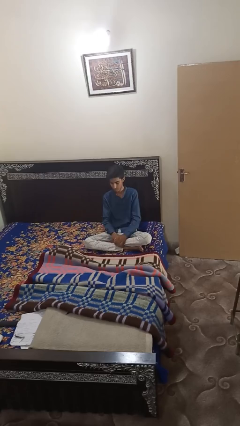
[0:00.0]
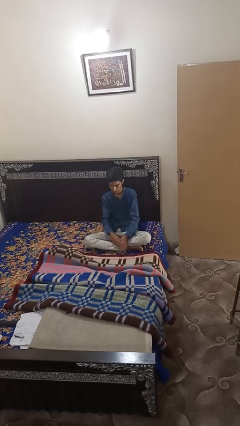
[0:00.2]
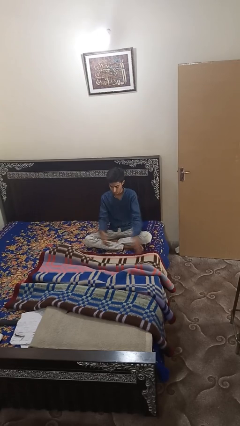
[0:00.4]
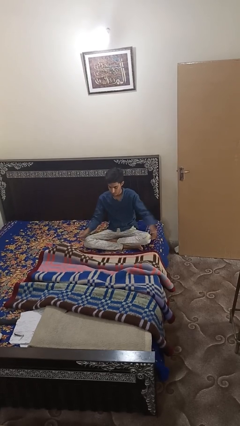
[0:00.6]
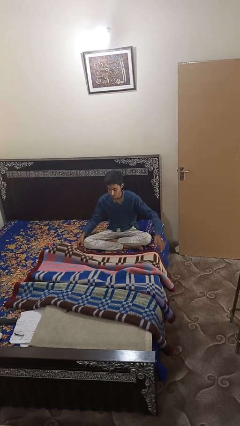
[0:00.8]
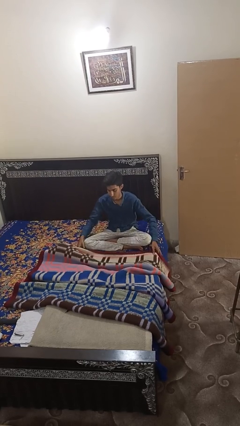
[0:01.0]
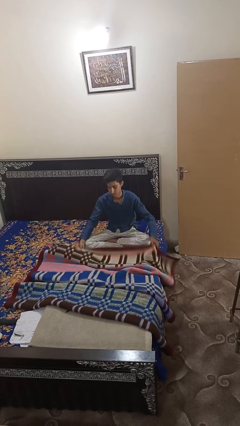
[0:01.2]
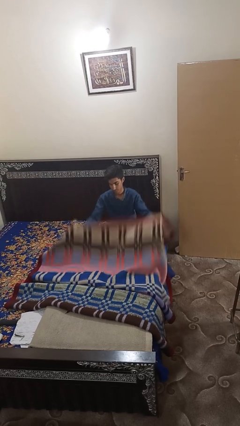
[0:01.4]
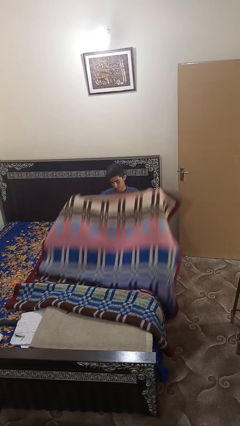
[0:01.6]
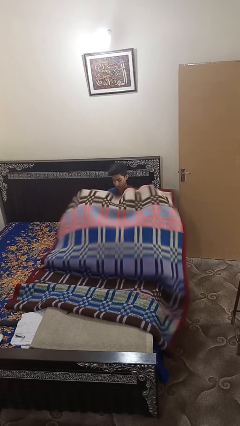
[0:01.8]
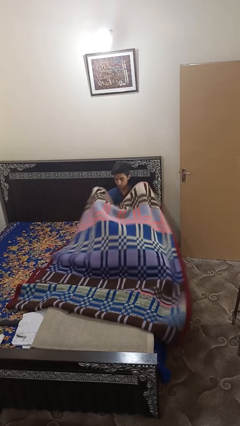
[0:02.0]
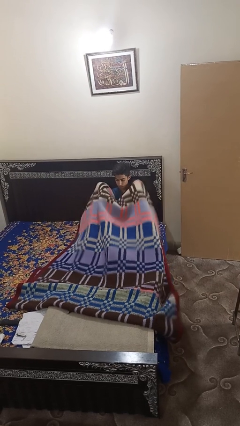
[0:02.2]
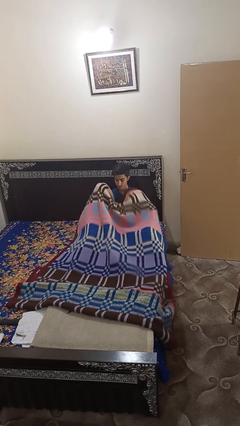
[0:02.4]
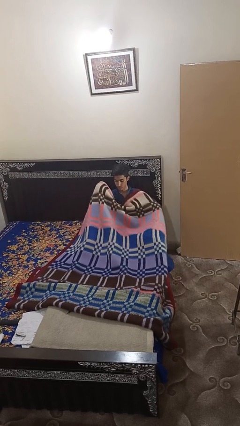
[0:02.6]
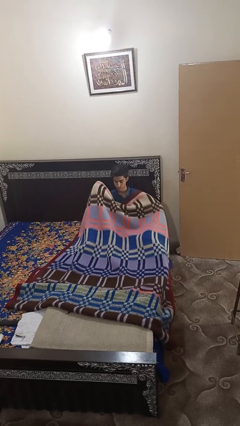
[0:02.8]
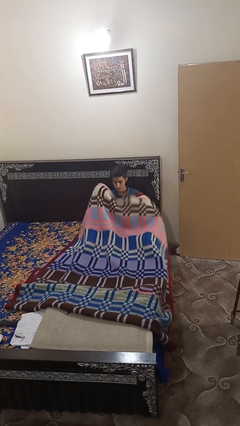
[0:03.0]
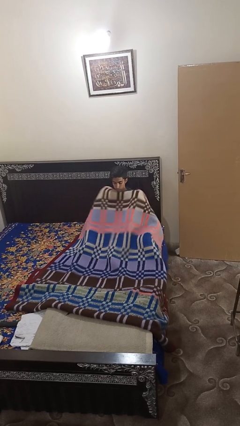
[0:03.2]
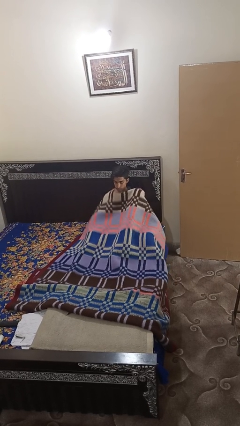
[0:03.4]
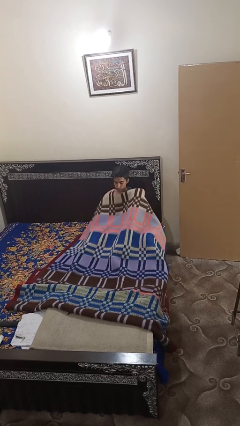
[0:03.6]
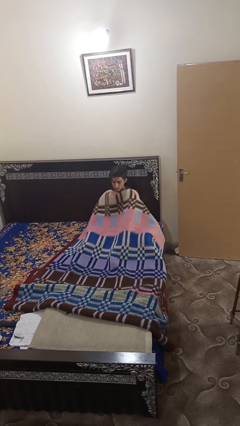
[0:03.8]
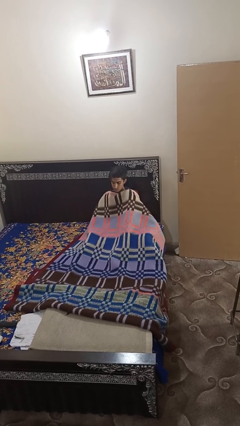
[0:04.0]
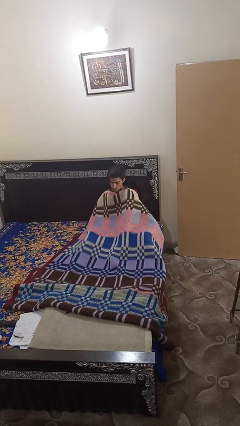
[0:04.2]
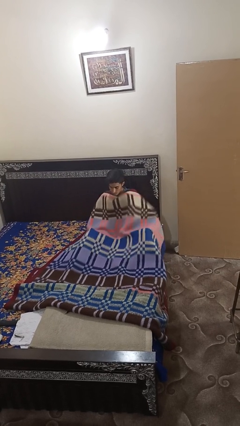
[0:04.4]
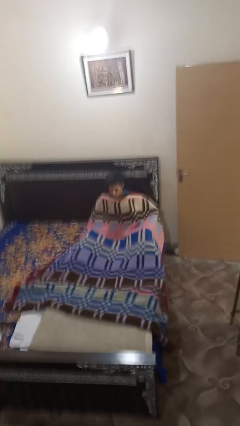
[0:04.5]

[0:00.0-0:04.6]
person covers with blanket

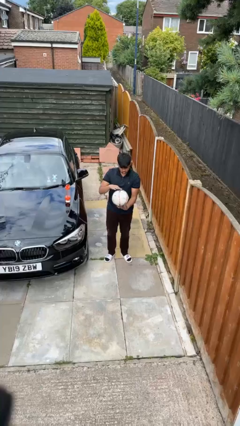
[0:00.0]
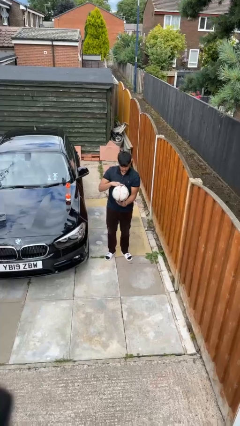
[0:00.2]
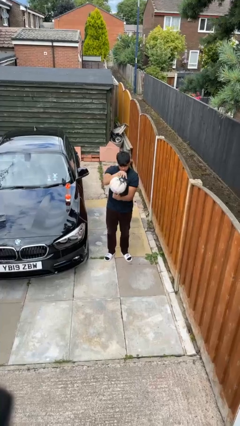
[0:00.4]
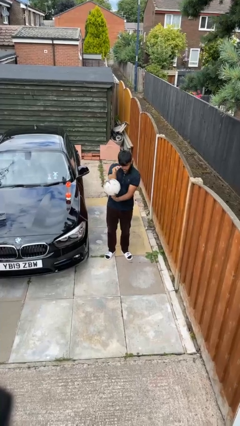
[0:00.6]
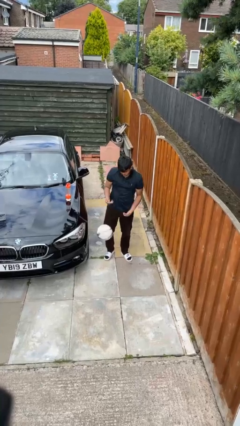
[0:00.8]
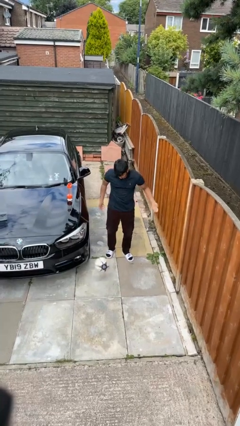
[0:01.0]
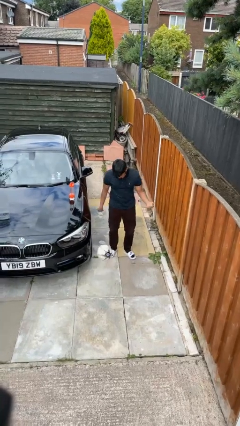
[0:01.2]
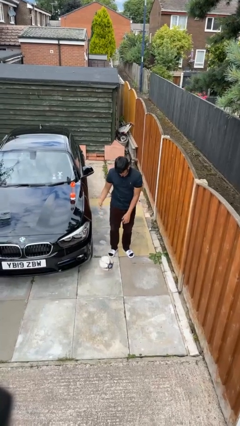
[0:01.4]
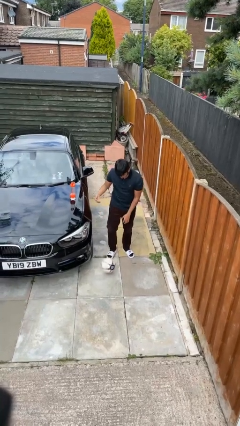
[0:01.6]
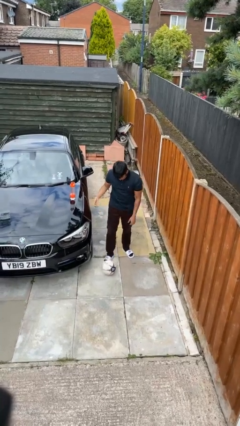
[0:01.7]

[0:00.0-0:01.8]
person drops object

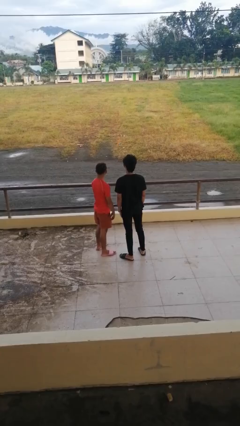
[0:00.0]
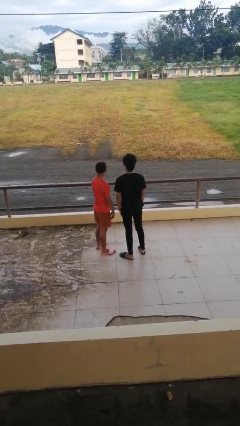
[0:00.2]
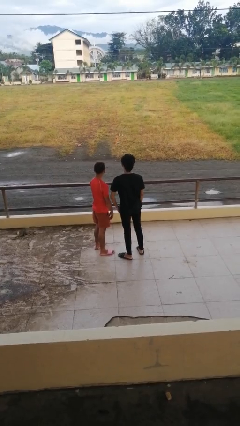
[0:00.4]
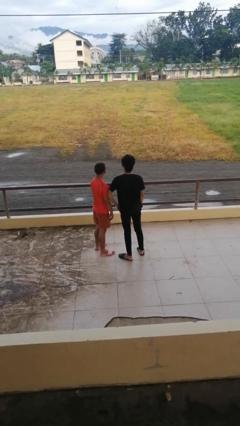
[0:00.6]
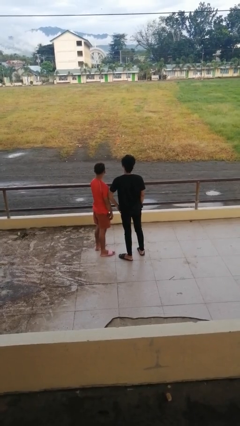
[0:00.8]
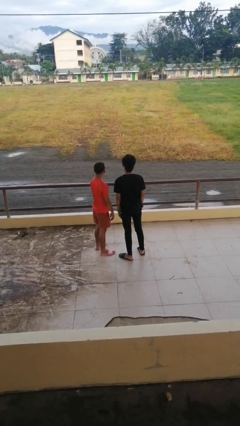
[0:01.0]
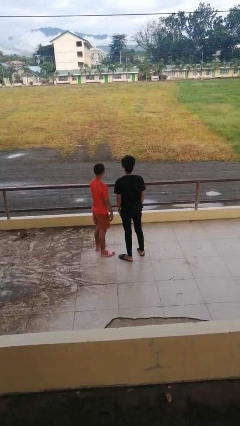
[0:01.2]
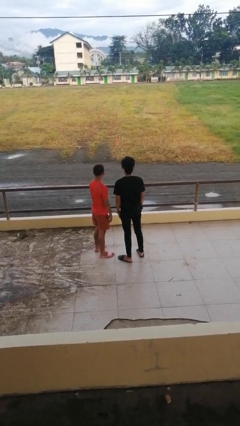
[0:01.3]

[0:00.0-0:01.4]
person nudges person with elbow

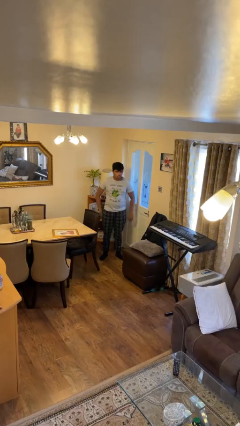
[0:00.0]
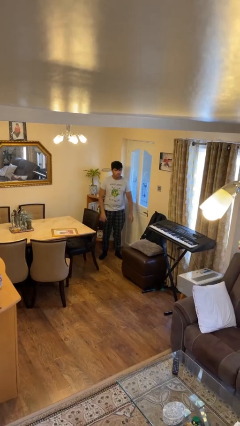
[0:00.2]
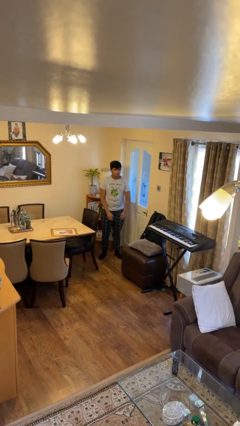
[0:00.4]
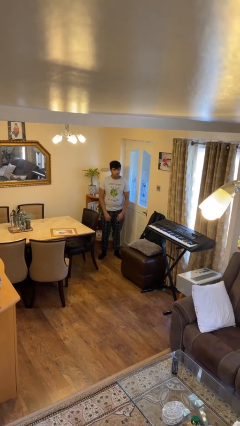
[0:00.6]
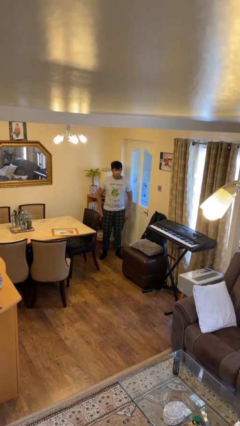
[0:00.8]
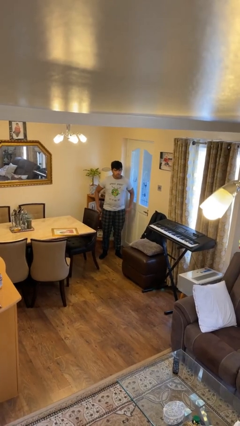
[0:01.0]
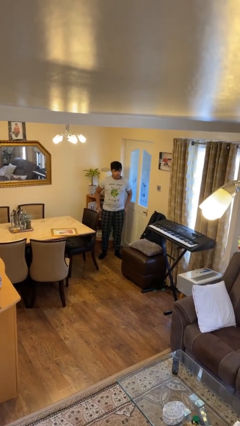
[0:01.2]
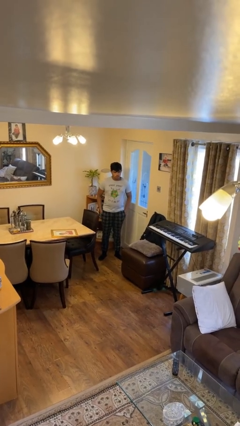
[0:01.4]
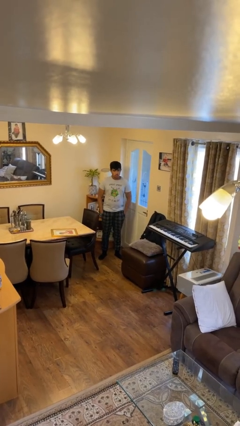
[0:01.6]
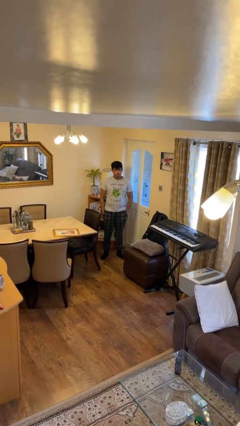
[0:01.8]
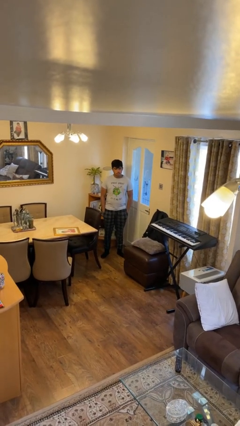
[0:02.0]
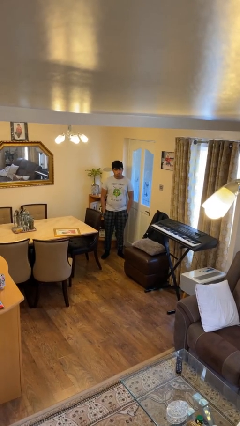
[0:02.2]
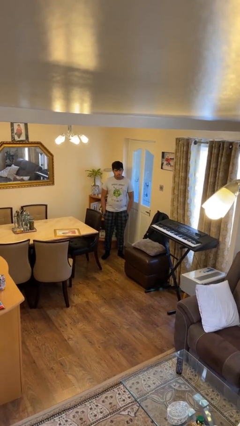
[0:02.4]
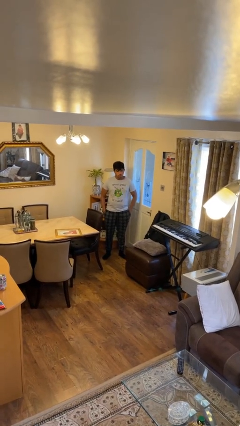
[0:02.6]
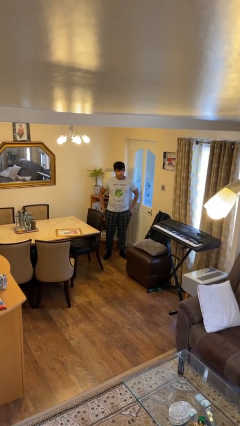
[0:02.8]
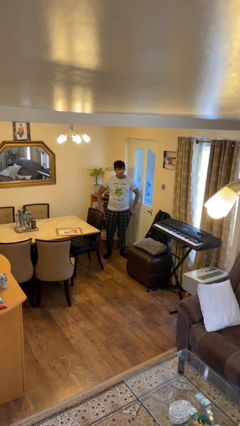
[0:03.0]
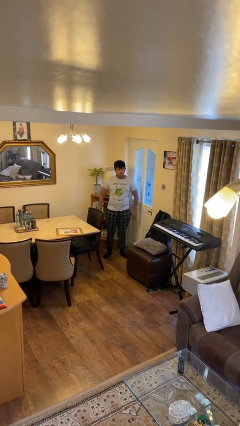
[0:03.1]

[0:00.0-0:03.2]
person puts hands in back pockets

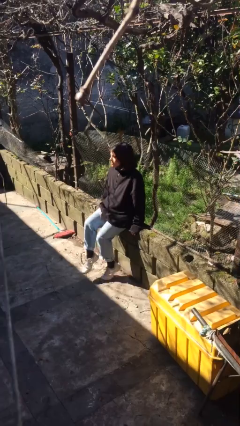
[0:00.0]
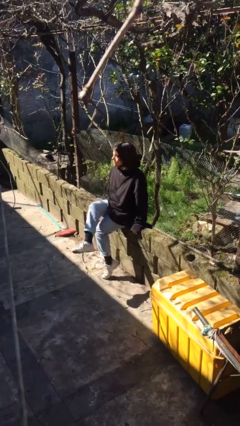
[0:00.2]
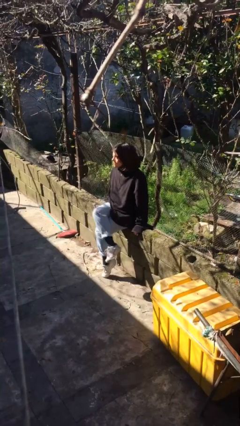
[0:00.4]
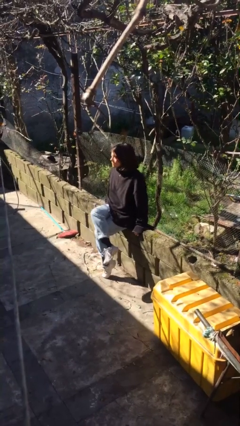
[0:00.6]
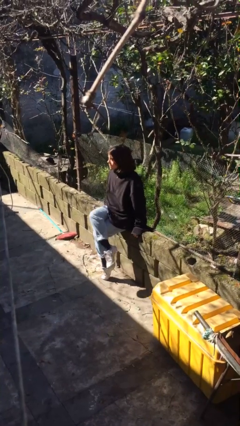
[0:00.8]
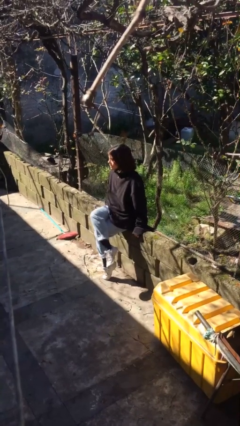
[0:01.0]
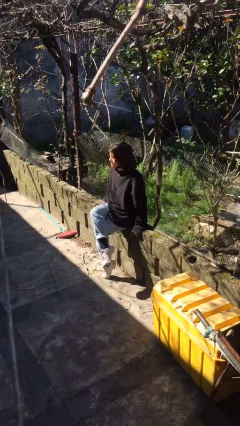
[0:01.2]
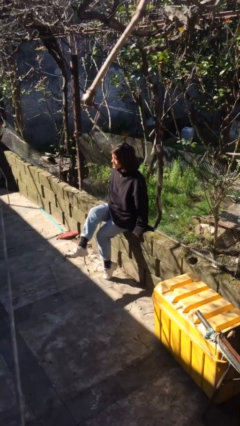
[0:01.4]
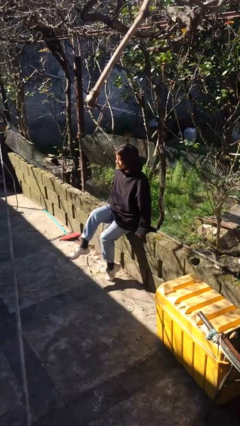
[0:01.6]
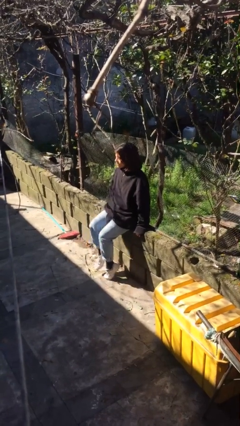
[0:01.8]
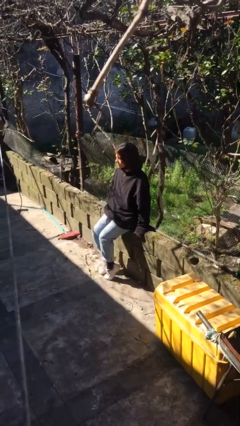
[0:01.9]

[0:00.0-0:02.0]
person crosses legs

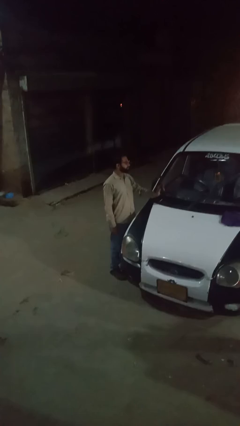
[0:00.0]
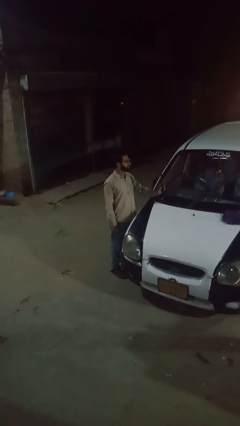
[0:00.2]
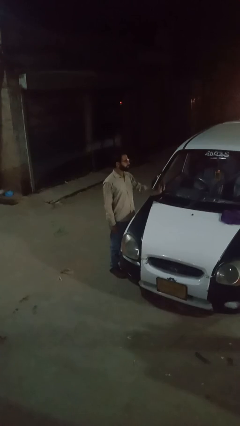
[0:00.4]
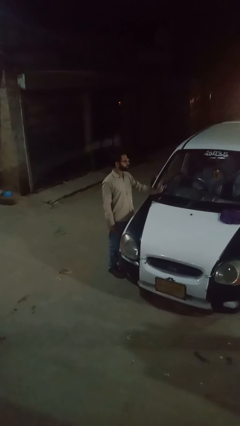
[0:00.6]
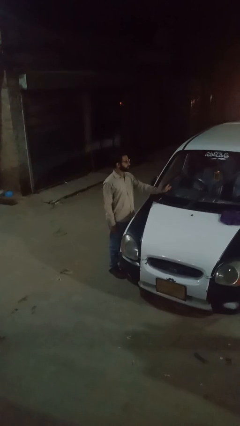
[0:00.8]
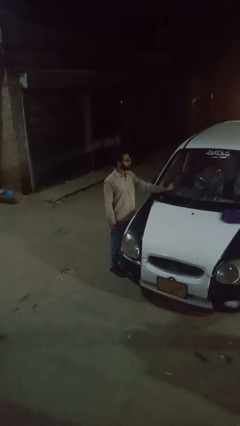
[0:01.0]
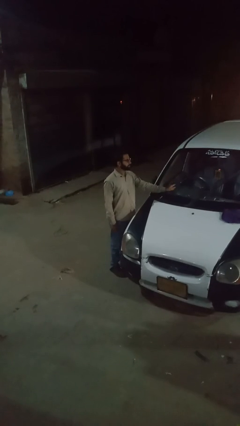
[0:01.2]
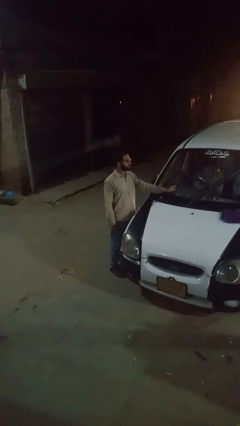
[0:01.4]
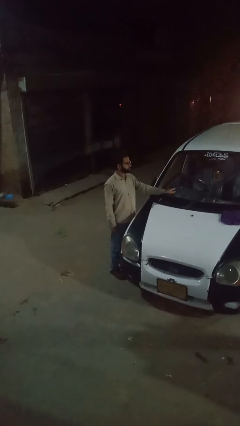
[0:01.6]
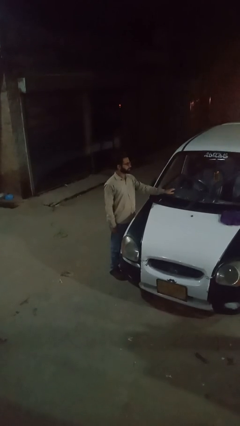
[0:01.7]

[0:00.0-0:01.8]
person flips down car wipers

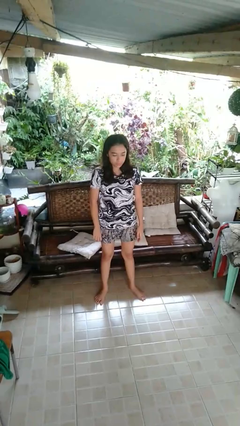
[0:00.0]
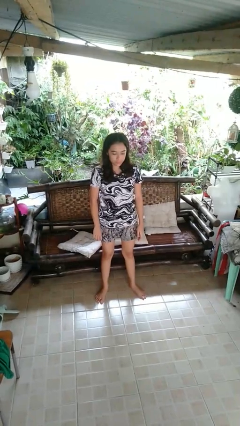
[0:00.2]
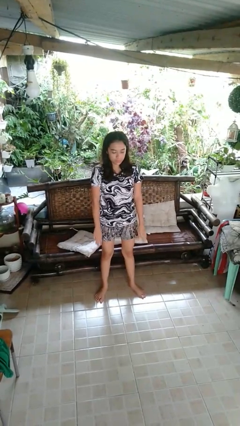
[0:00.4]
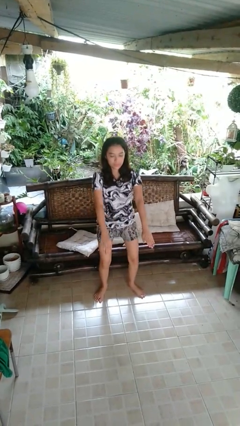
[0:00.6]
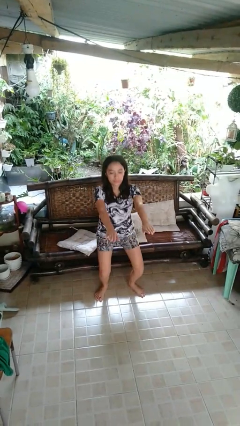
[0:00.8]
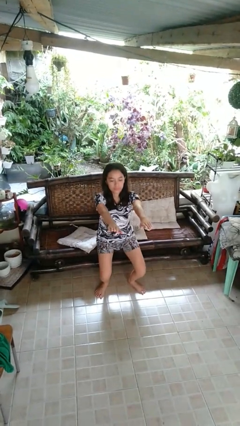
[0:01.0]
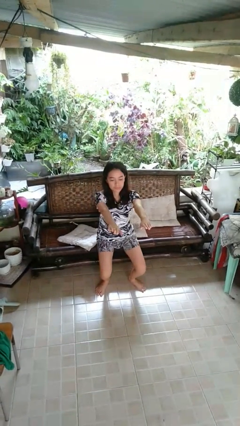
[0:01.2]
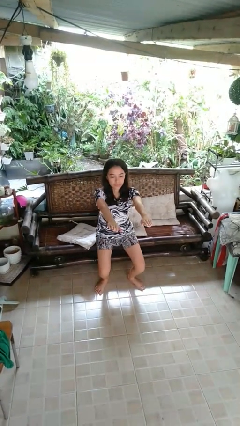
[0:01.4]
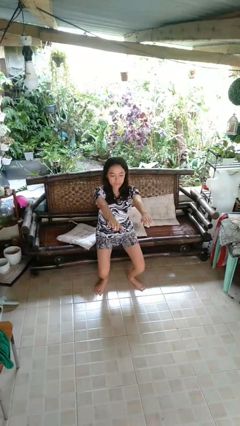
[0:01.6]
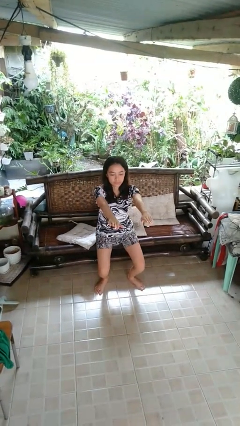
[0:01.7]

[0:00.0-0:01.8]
person squats

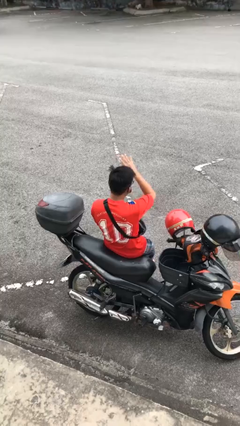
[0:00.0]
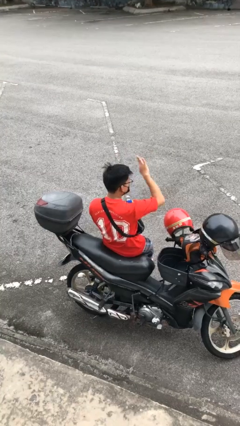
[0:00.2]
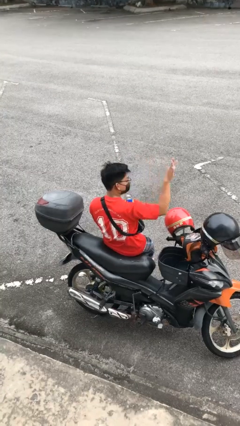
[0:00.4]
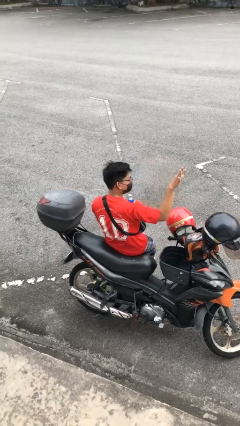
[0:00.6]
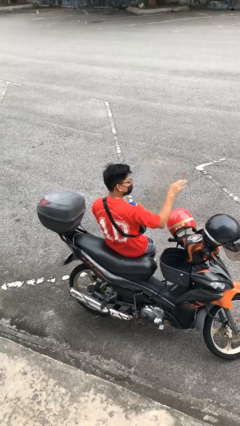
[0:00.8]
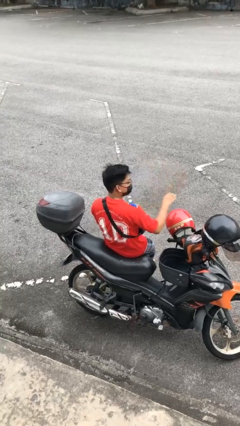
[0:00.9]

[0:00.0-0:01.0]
person gestures swipe right
